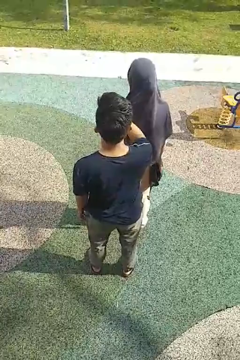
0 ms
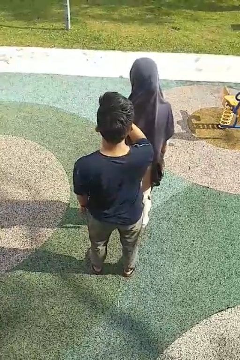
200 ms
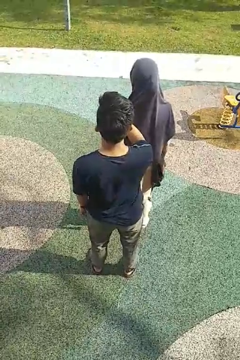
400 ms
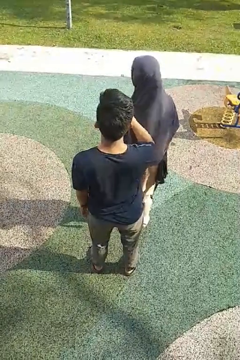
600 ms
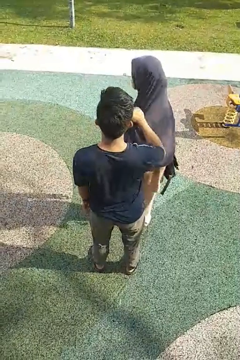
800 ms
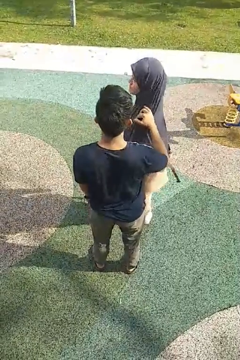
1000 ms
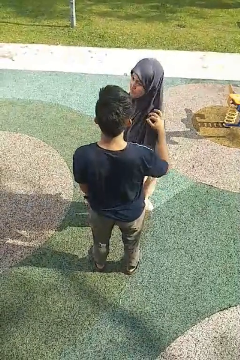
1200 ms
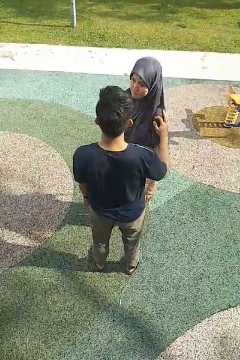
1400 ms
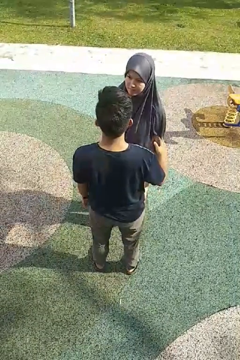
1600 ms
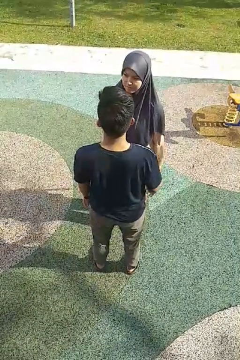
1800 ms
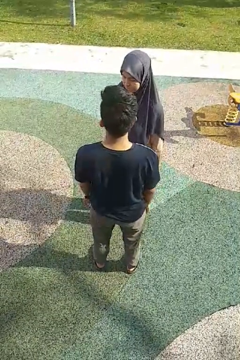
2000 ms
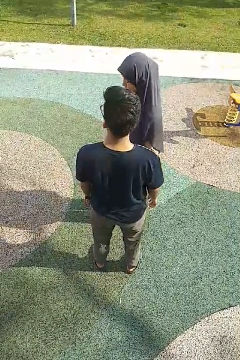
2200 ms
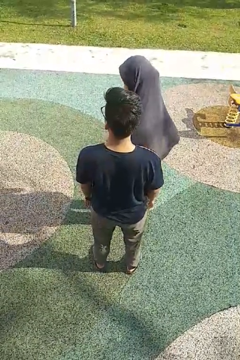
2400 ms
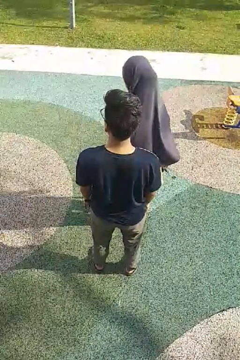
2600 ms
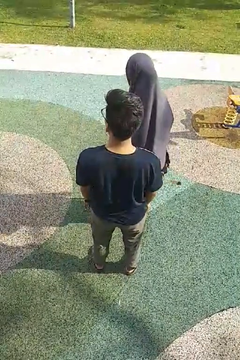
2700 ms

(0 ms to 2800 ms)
person spins person around

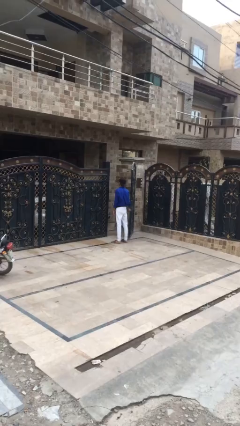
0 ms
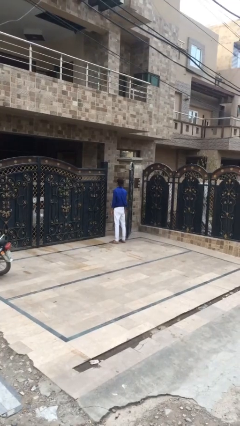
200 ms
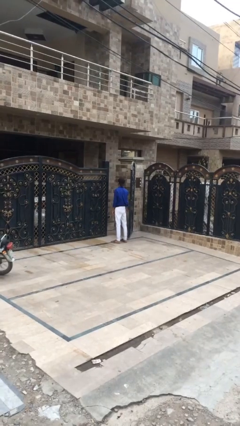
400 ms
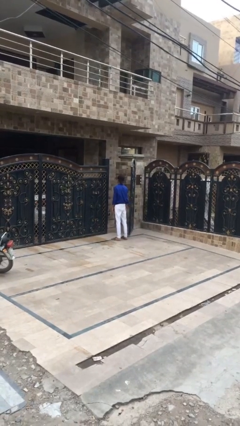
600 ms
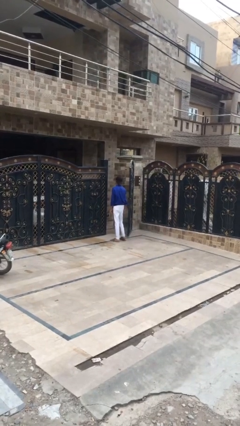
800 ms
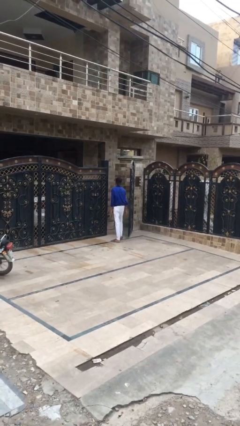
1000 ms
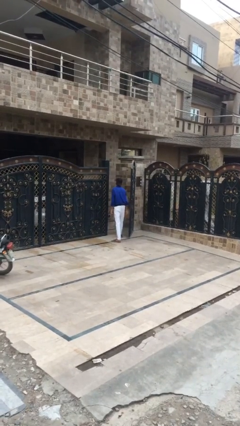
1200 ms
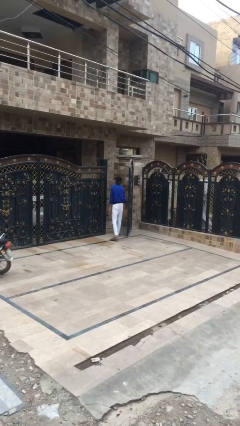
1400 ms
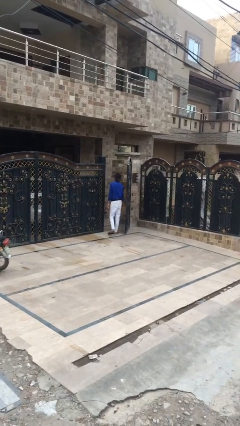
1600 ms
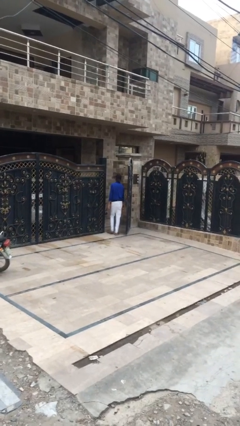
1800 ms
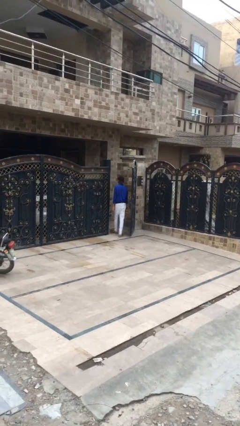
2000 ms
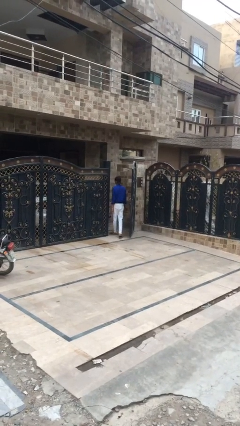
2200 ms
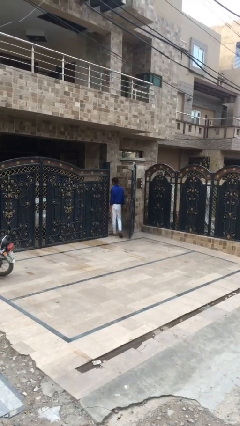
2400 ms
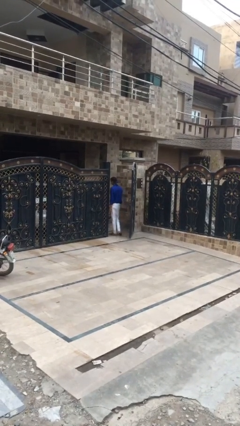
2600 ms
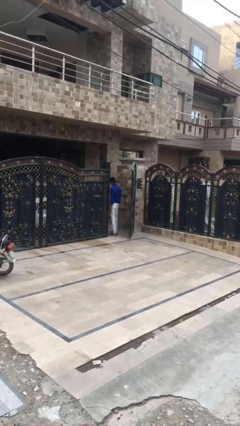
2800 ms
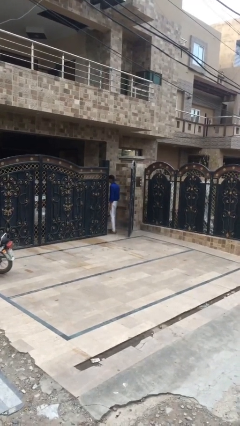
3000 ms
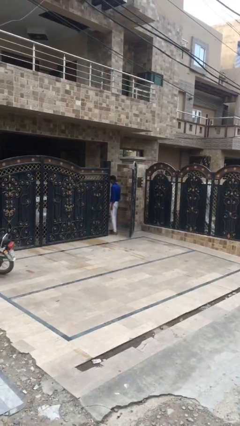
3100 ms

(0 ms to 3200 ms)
person exits scene through structure

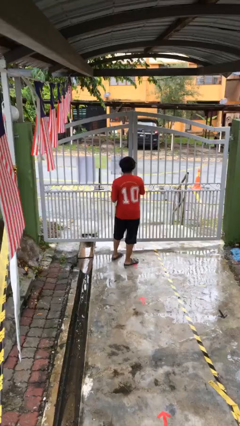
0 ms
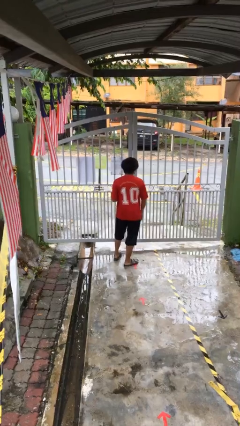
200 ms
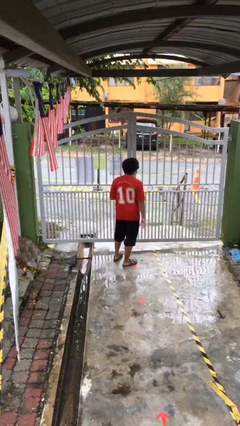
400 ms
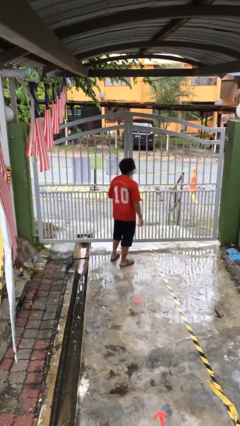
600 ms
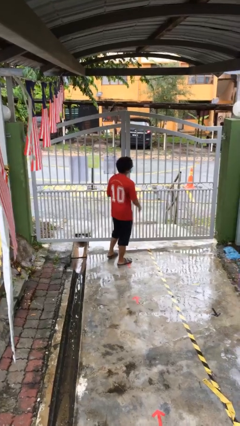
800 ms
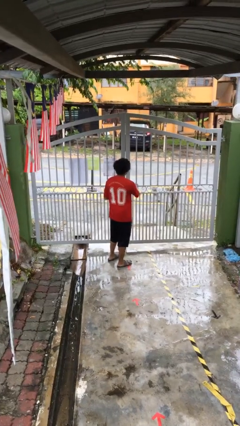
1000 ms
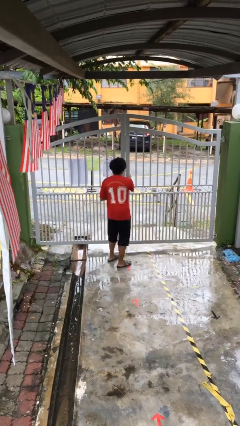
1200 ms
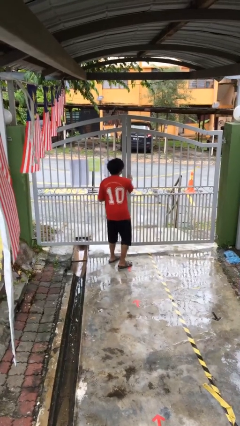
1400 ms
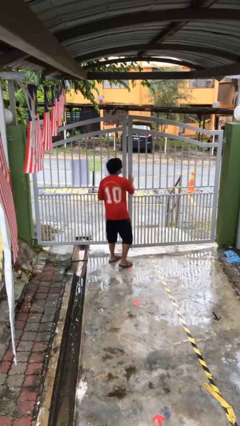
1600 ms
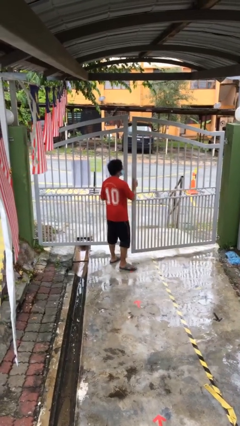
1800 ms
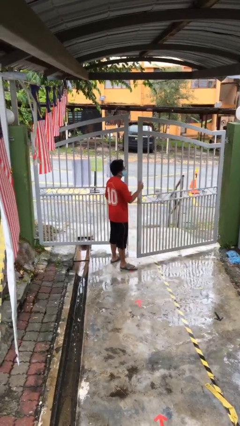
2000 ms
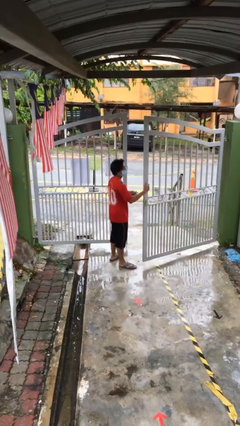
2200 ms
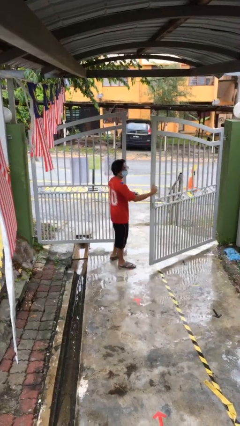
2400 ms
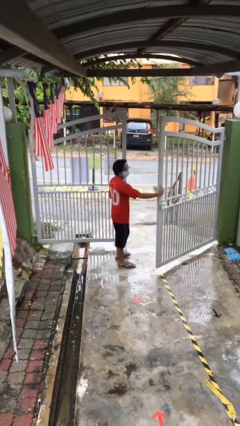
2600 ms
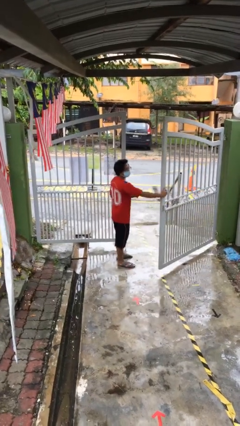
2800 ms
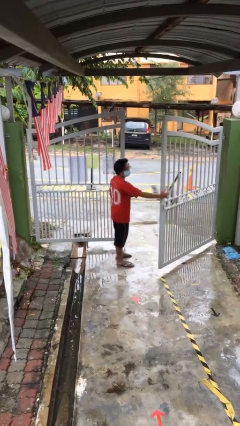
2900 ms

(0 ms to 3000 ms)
person opens facility door

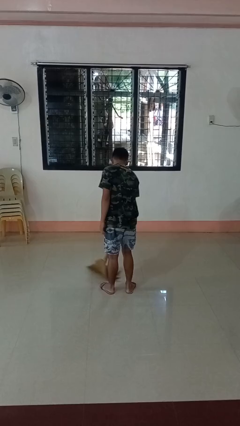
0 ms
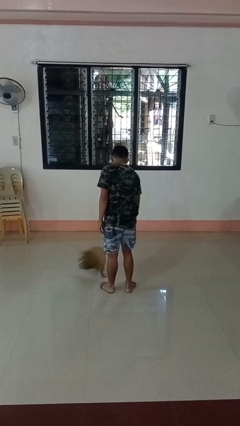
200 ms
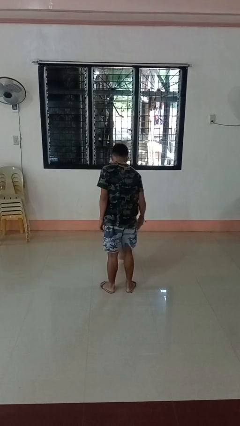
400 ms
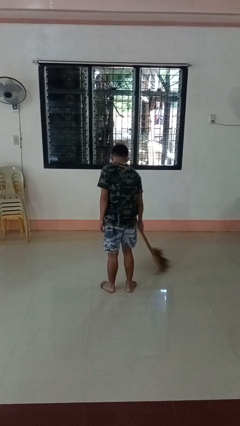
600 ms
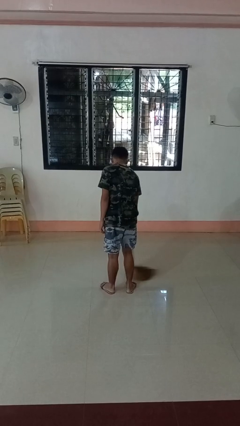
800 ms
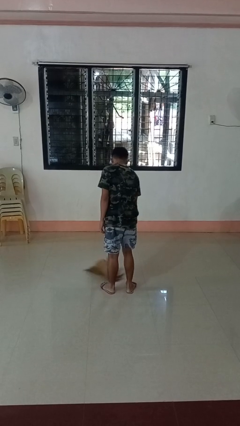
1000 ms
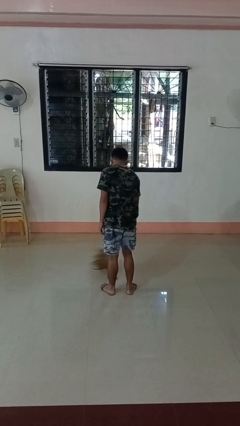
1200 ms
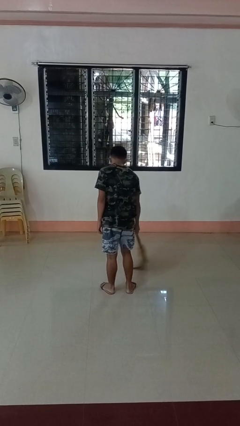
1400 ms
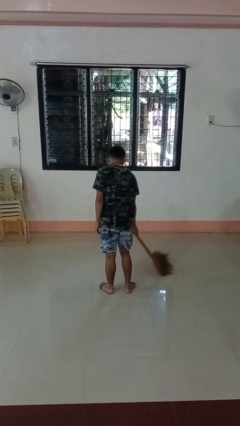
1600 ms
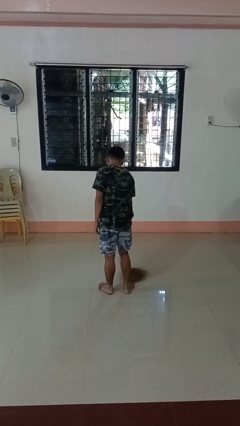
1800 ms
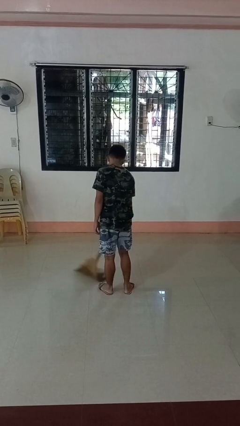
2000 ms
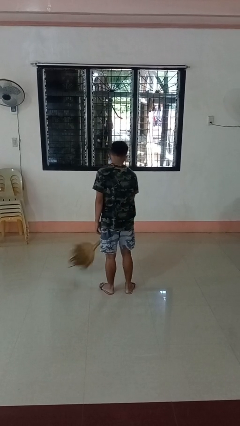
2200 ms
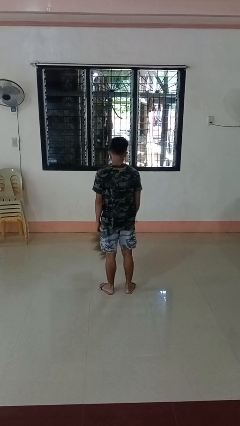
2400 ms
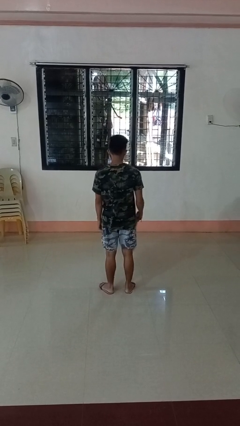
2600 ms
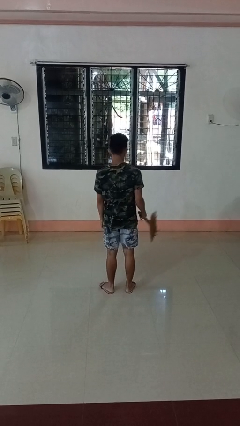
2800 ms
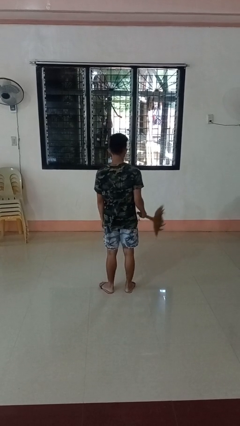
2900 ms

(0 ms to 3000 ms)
person sweeps floor

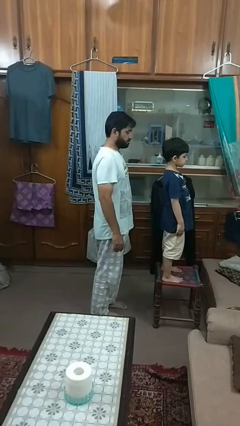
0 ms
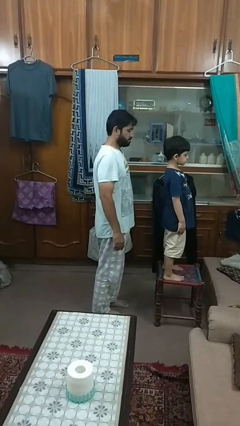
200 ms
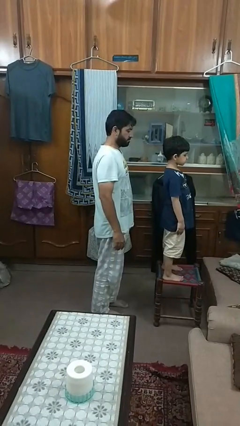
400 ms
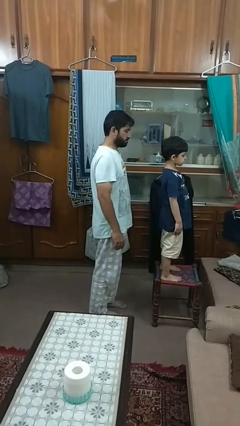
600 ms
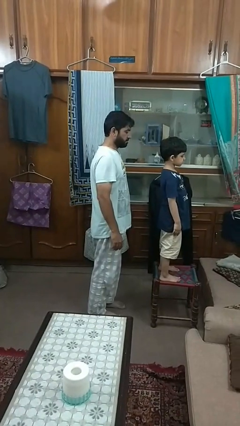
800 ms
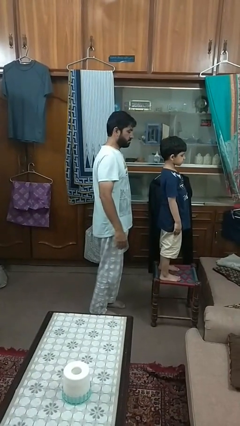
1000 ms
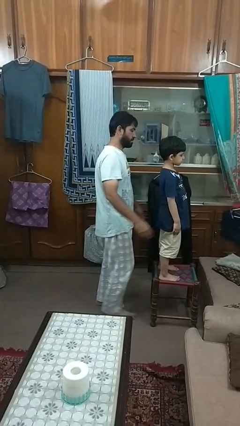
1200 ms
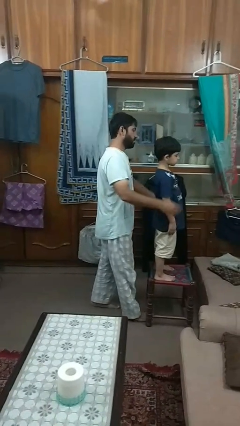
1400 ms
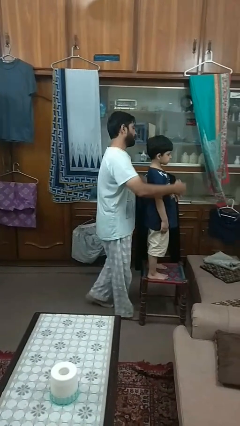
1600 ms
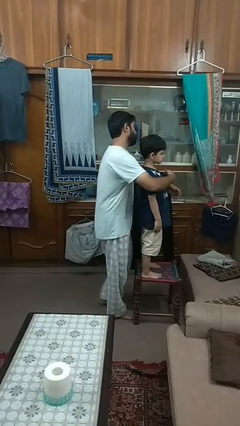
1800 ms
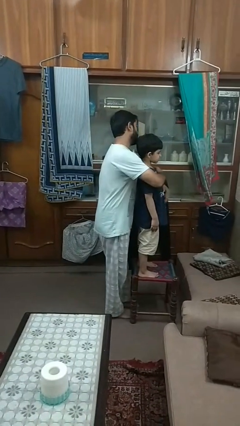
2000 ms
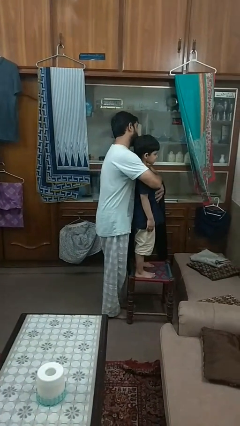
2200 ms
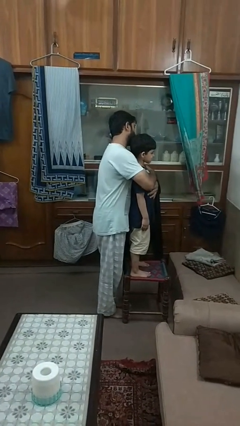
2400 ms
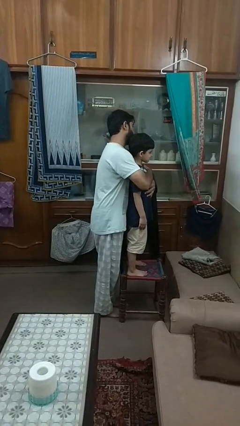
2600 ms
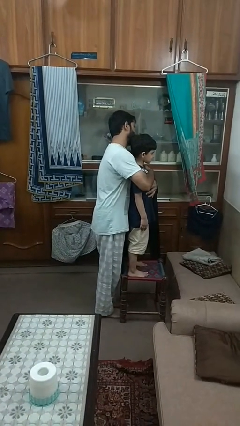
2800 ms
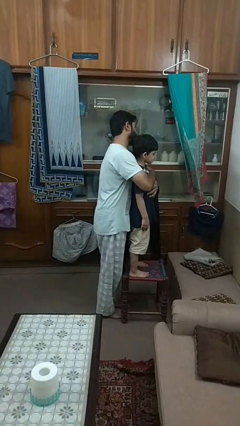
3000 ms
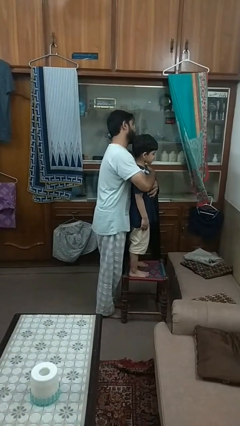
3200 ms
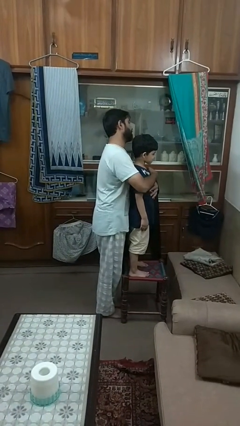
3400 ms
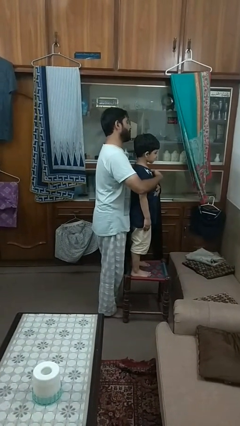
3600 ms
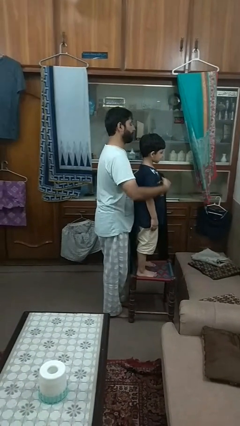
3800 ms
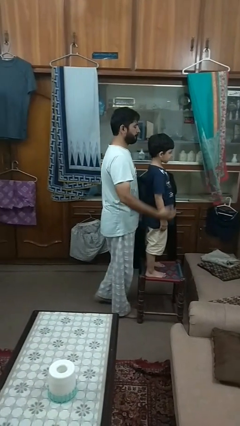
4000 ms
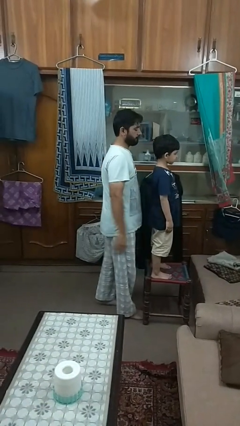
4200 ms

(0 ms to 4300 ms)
person hugs person from behind

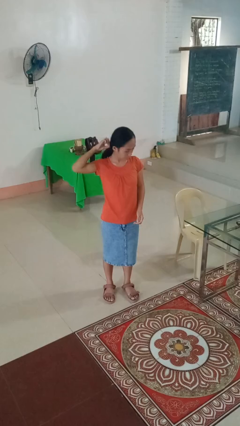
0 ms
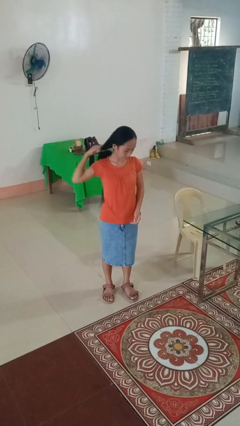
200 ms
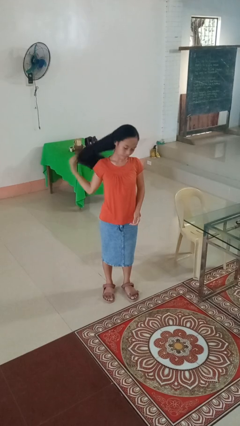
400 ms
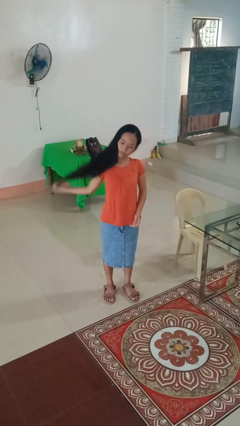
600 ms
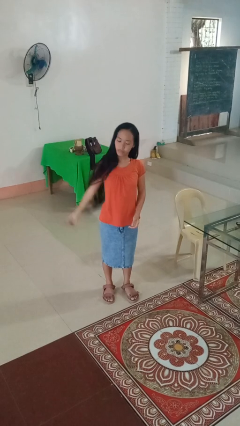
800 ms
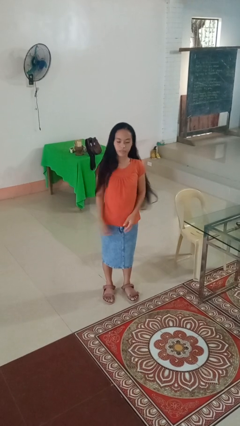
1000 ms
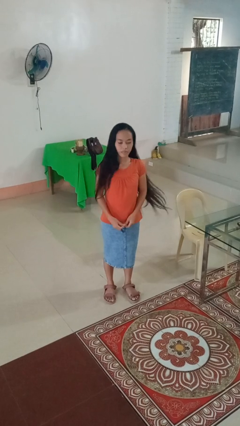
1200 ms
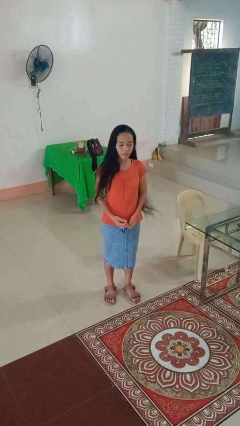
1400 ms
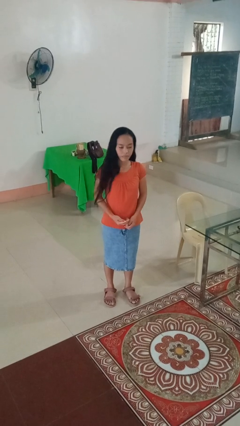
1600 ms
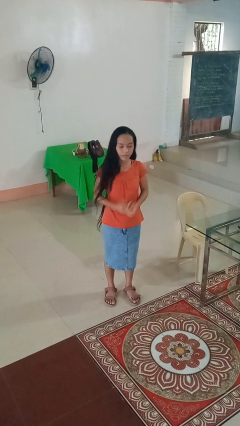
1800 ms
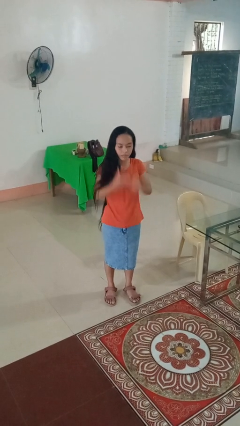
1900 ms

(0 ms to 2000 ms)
person takes off hairtie
